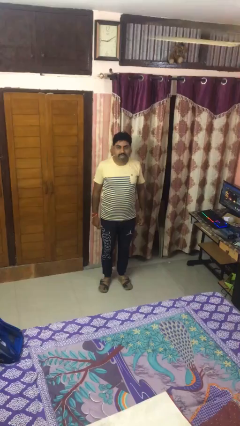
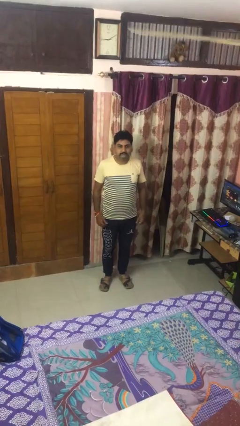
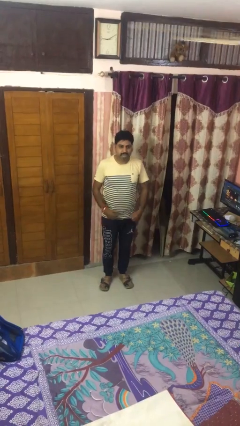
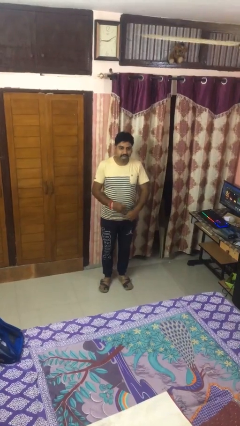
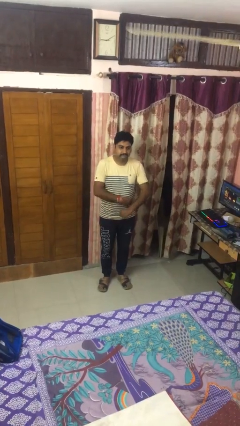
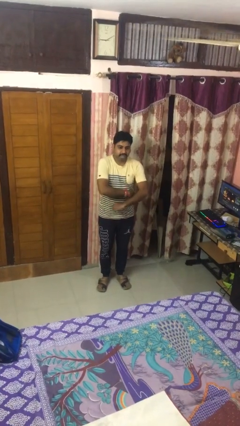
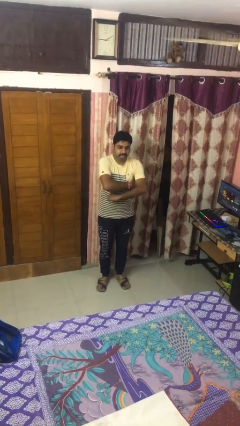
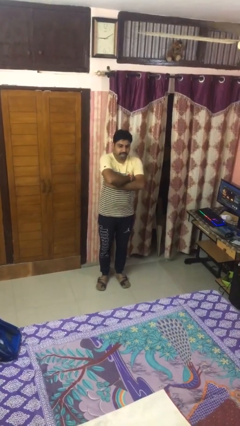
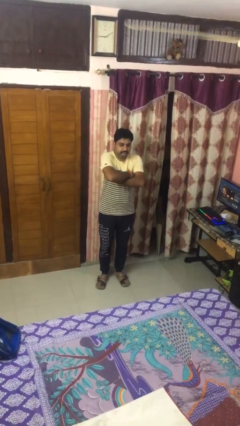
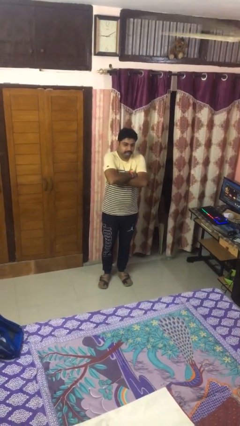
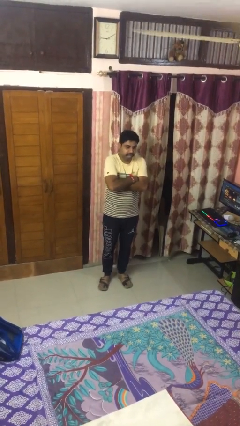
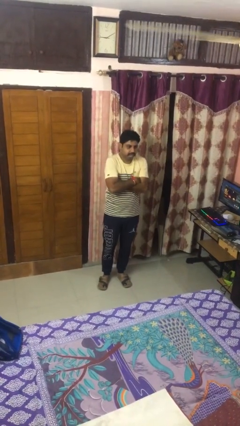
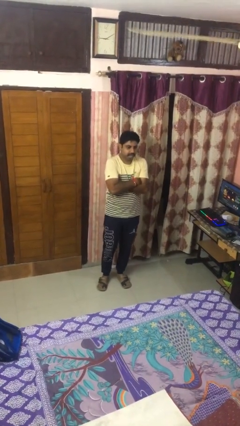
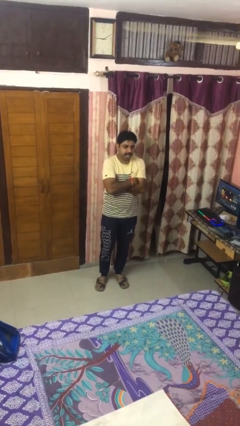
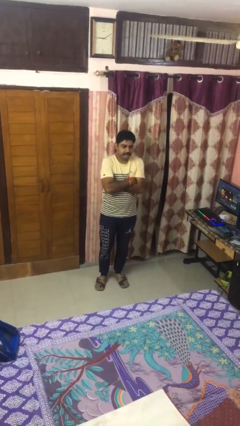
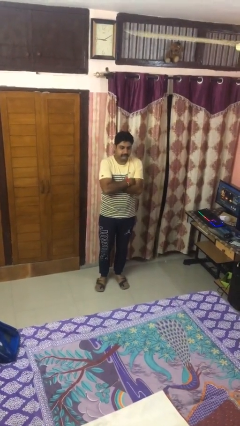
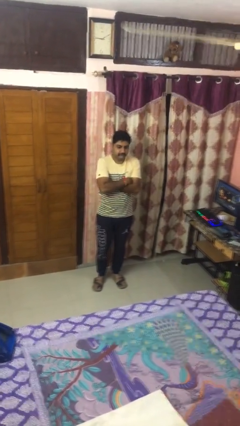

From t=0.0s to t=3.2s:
person crosses arms

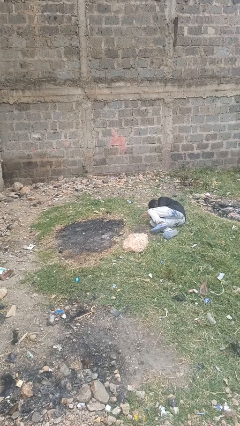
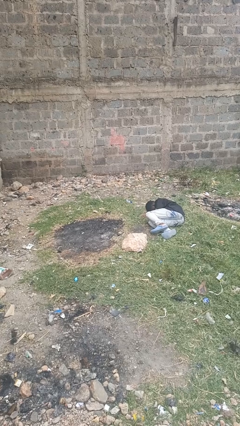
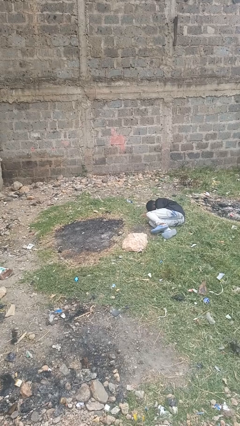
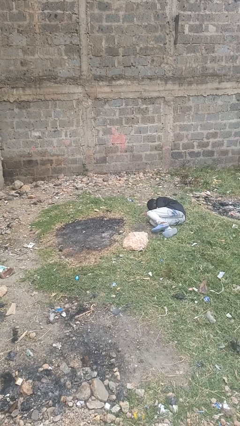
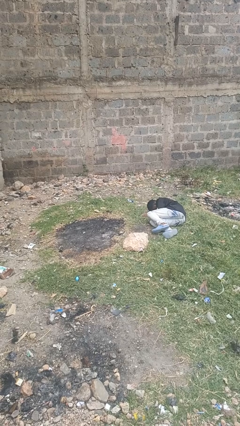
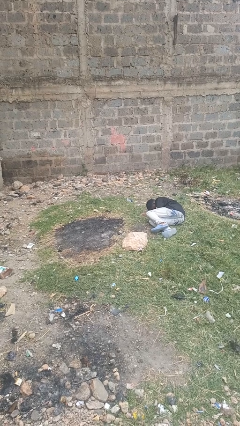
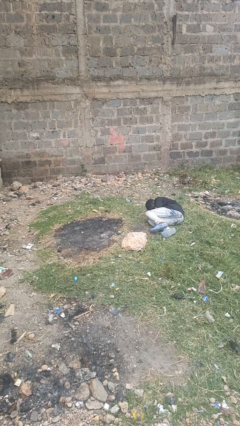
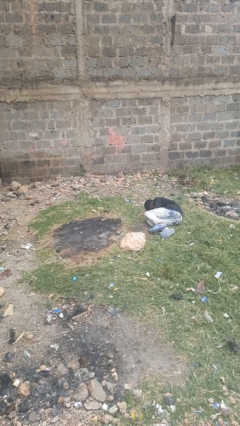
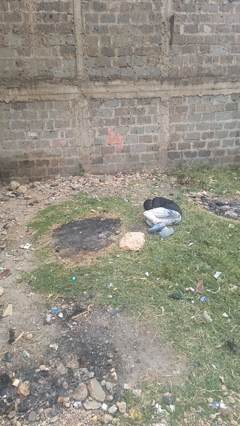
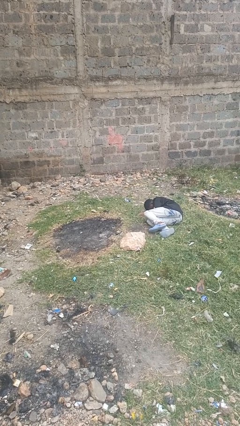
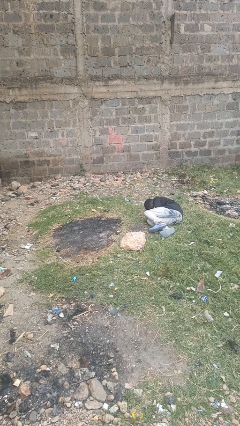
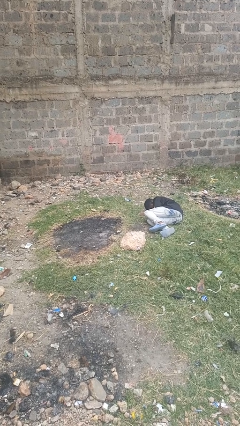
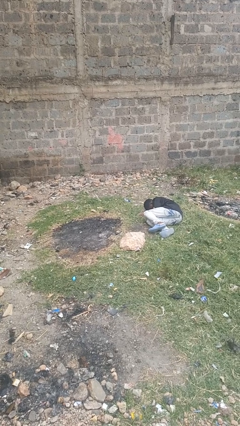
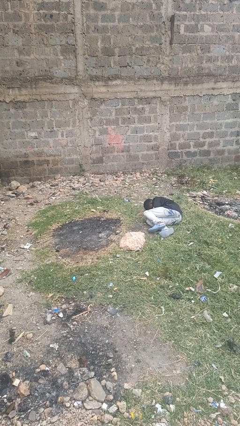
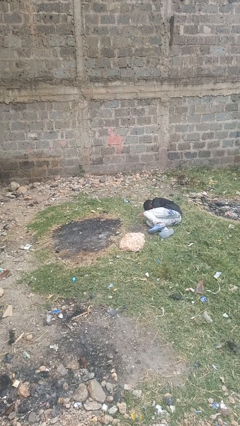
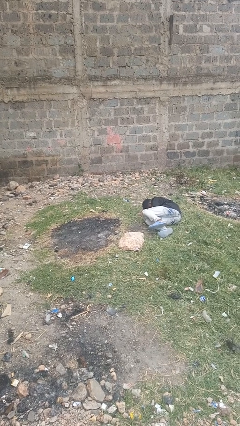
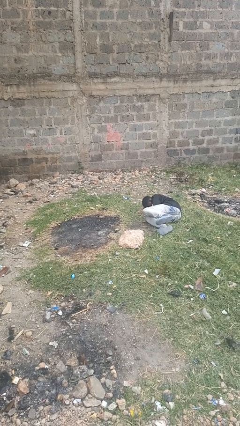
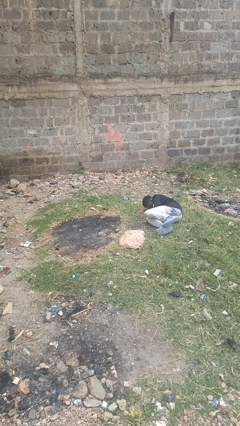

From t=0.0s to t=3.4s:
person lies down on floor

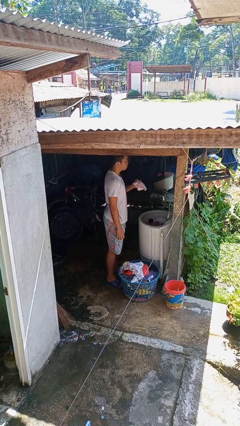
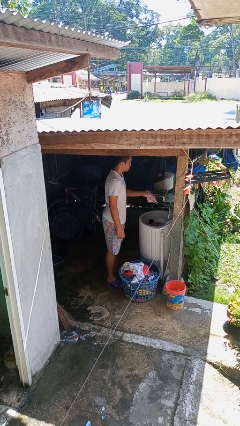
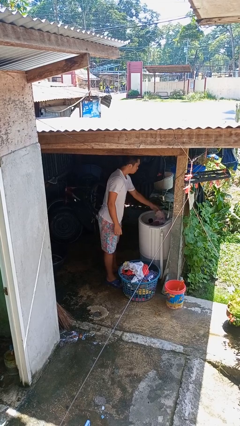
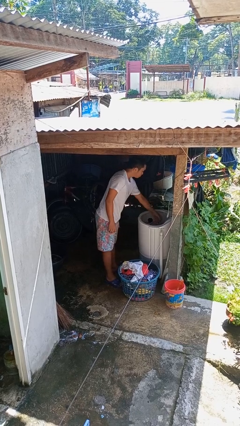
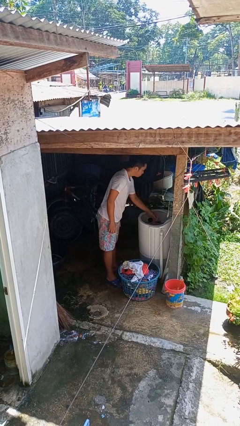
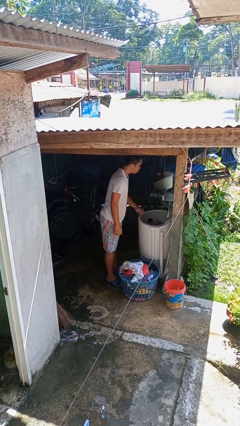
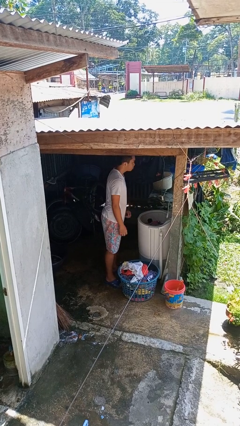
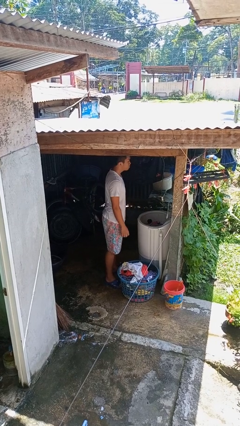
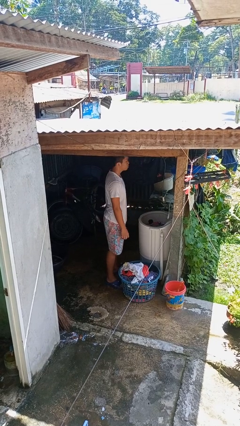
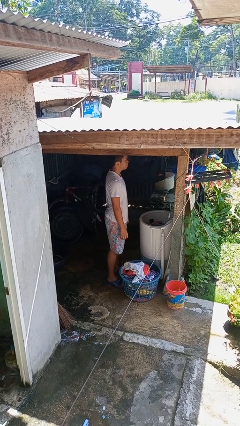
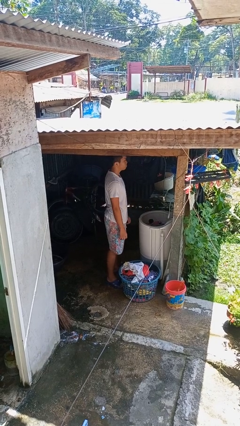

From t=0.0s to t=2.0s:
person loads clotheswasher

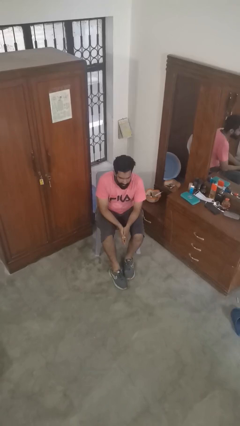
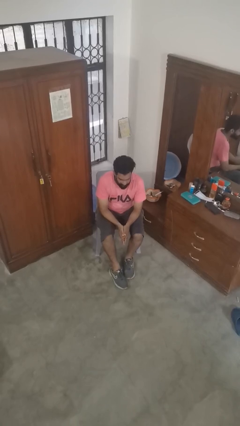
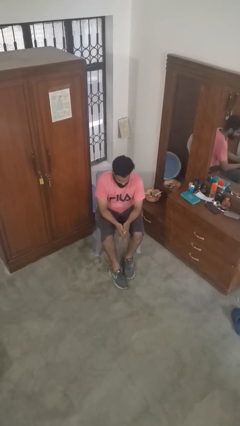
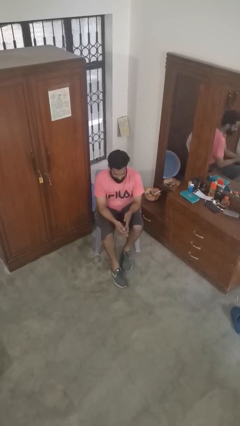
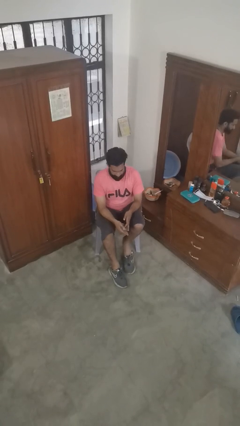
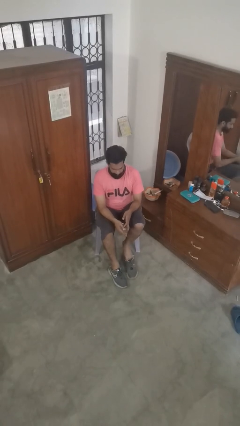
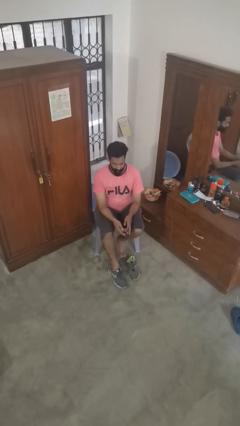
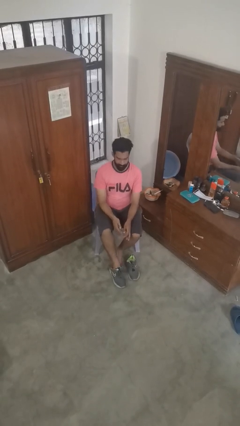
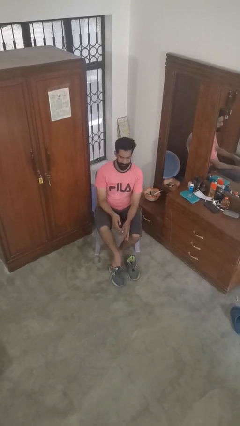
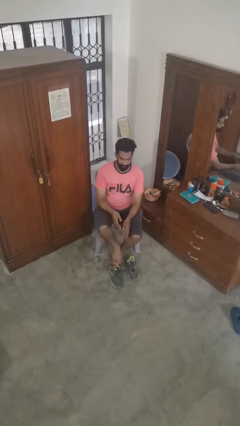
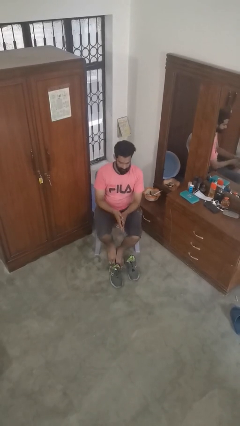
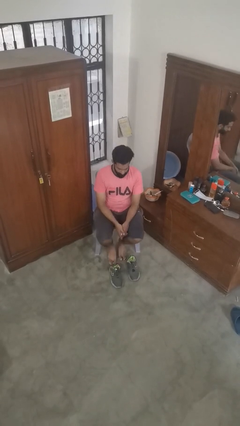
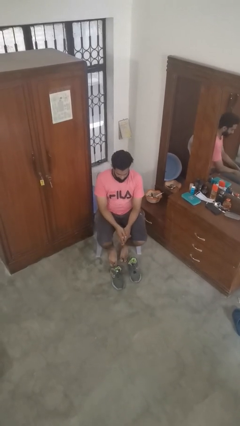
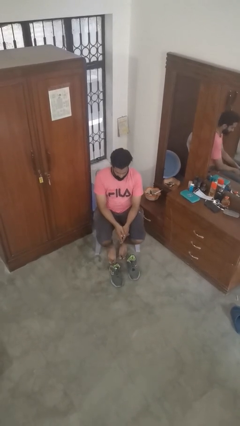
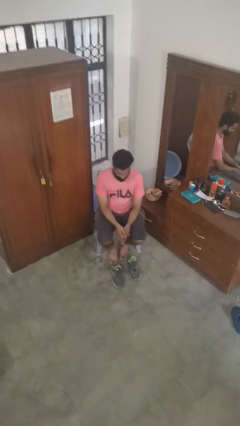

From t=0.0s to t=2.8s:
person takes off shoes

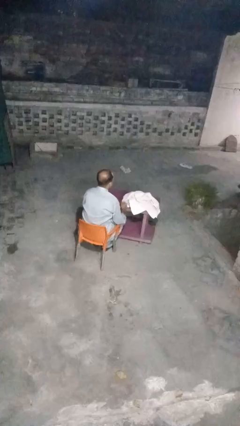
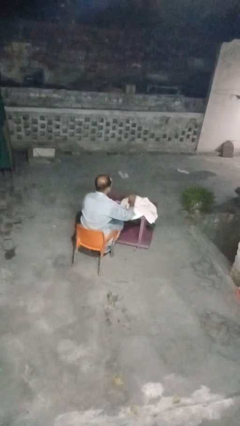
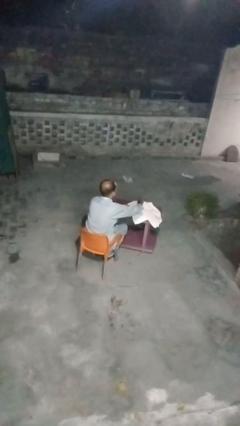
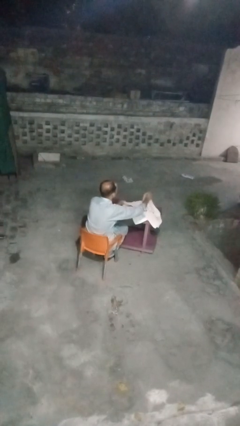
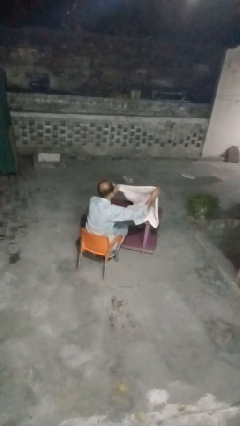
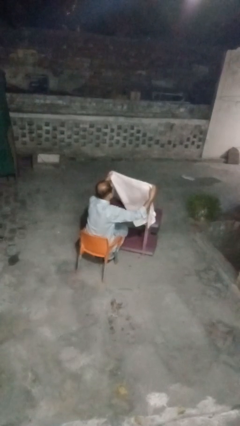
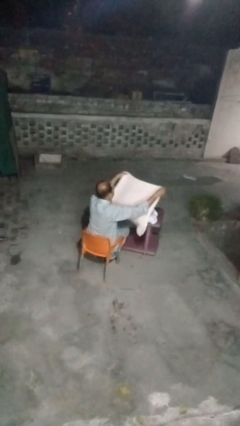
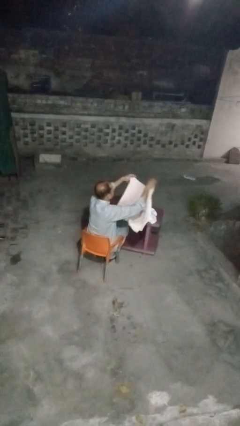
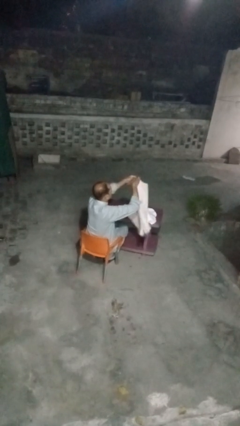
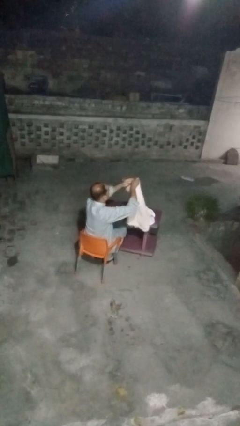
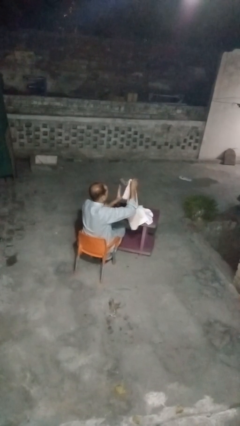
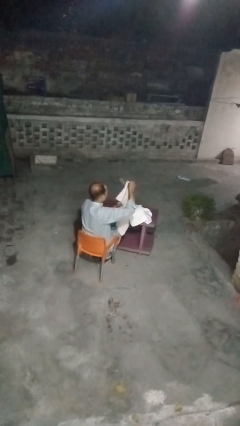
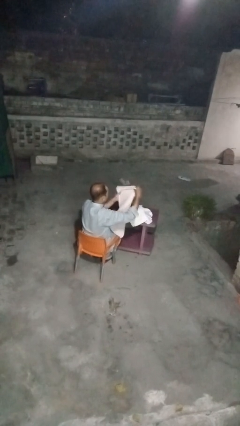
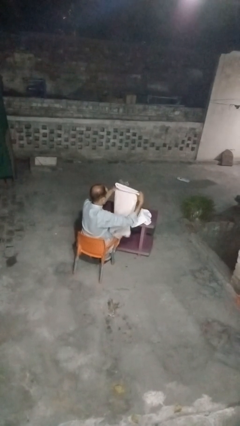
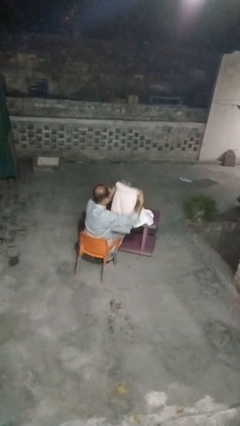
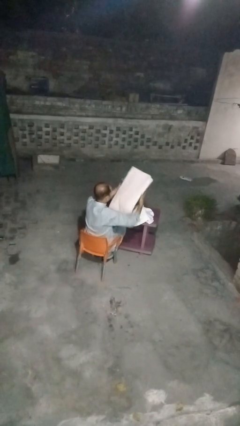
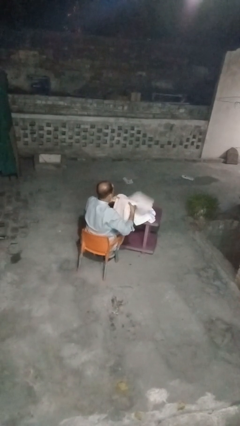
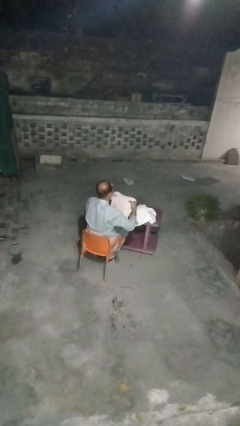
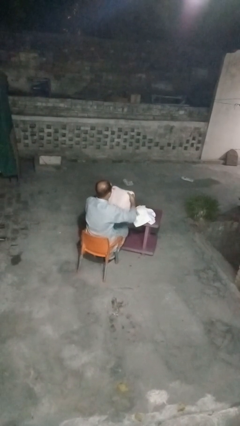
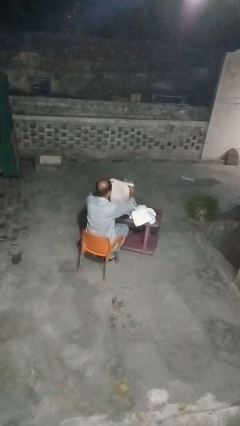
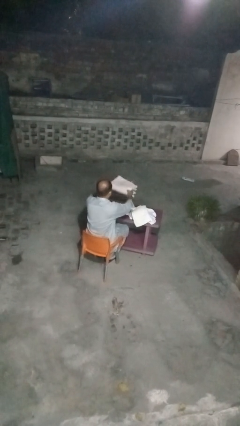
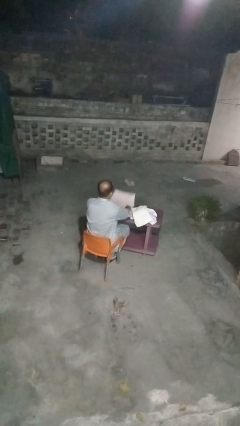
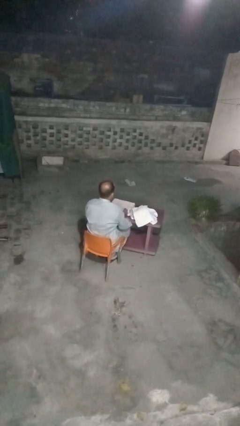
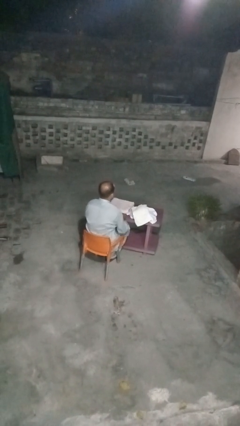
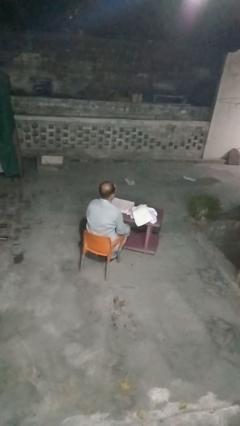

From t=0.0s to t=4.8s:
person folds towel

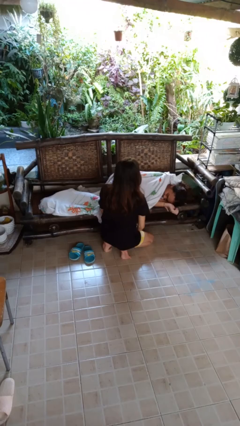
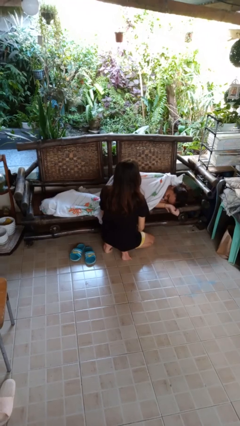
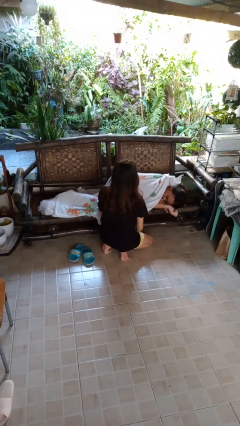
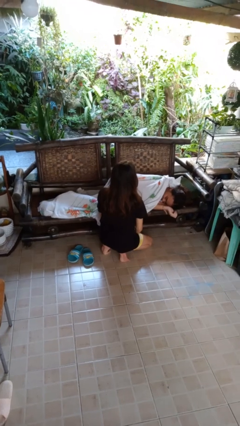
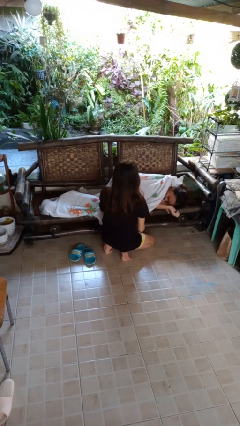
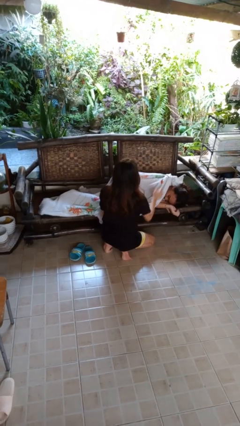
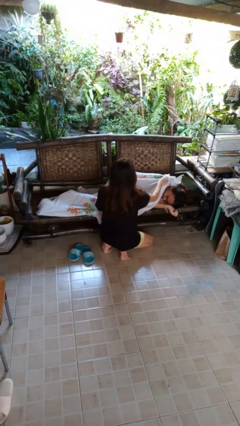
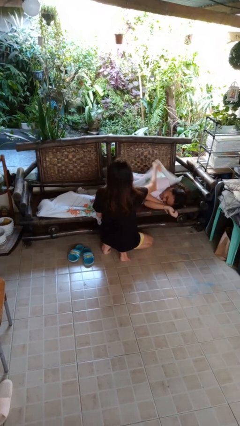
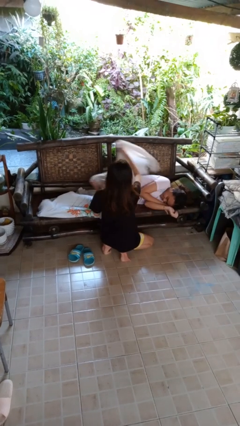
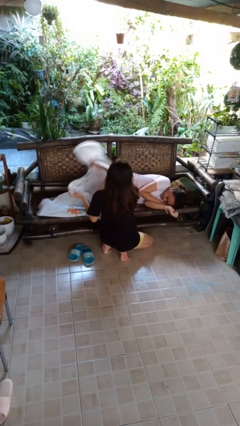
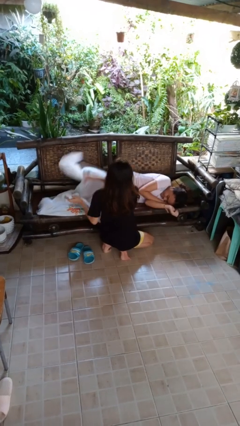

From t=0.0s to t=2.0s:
person uncovers friend with blanket
